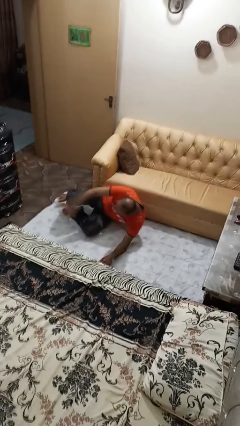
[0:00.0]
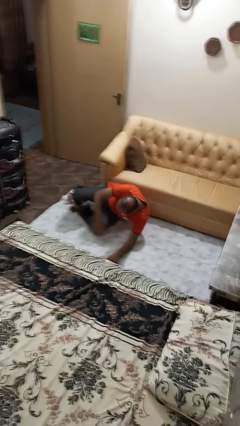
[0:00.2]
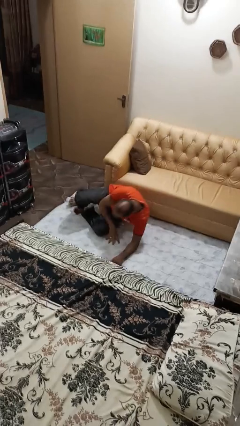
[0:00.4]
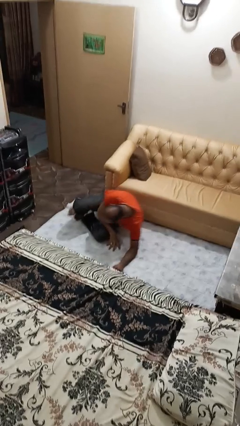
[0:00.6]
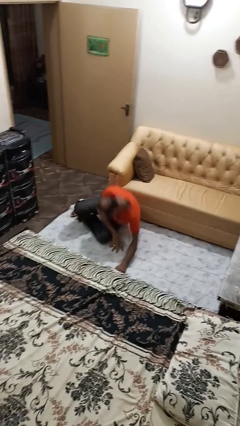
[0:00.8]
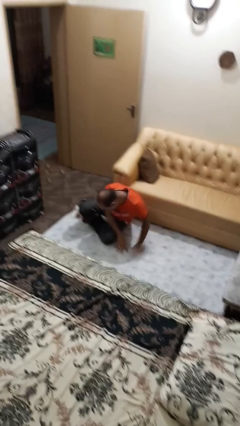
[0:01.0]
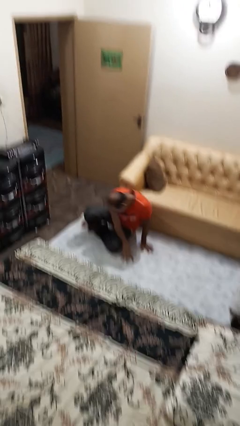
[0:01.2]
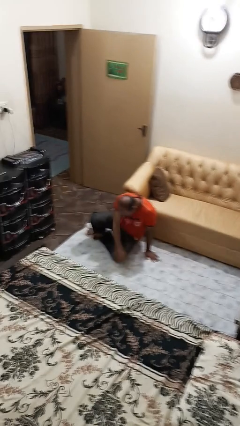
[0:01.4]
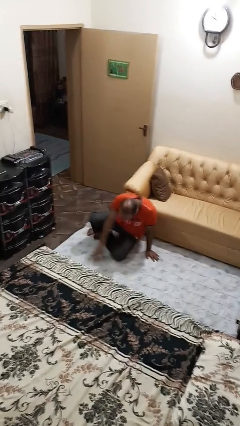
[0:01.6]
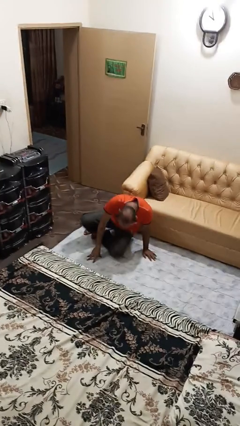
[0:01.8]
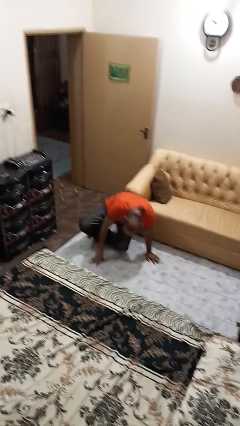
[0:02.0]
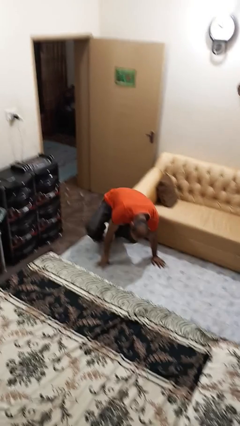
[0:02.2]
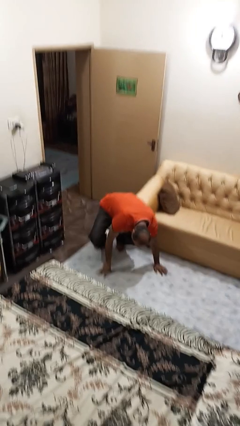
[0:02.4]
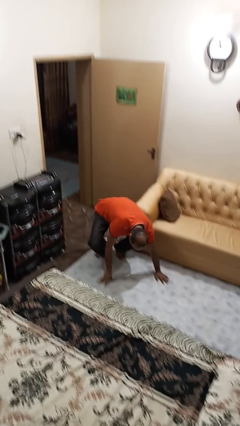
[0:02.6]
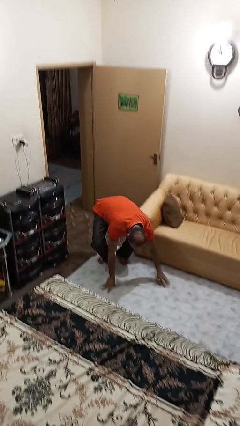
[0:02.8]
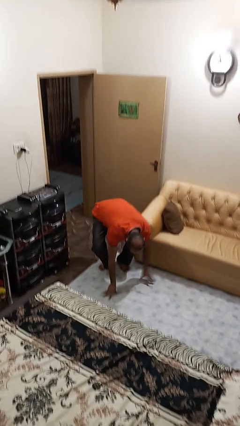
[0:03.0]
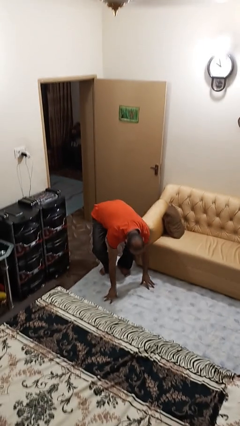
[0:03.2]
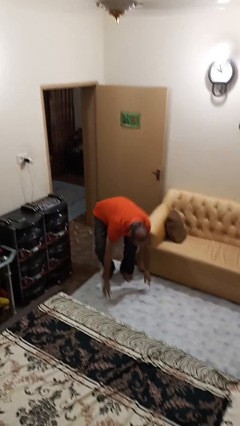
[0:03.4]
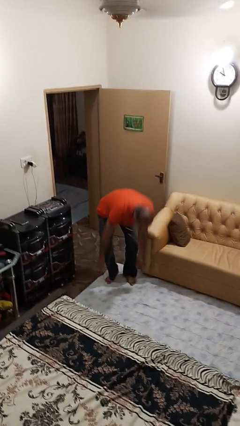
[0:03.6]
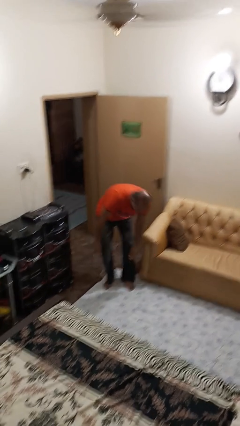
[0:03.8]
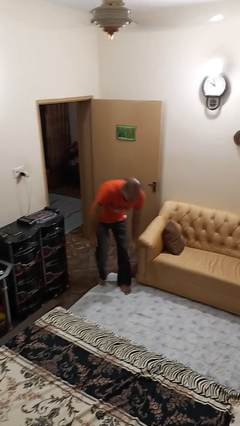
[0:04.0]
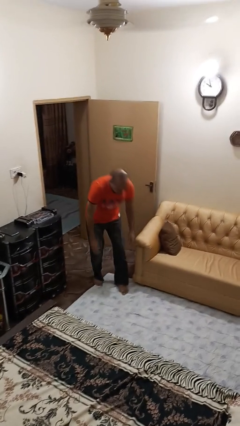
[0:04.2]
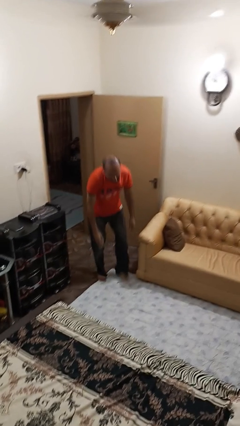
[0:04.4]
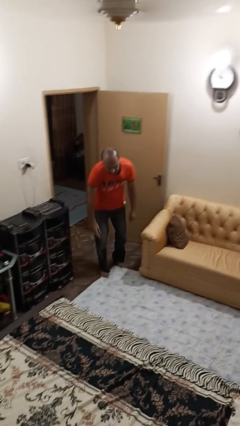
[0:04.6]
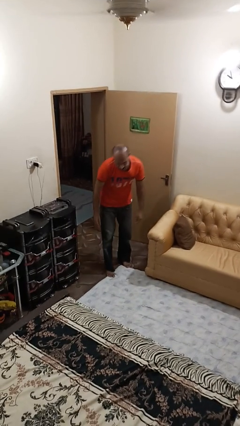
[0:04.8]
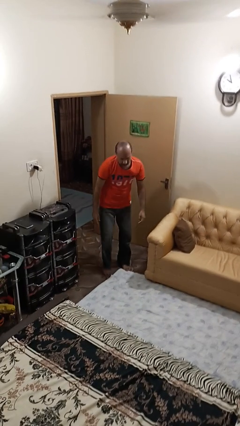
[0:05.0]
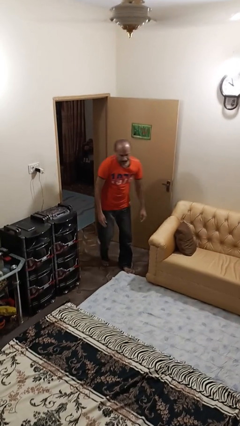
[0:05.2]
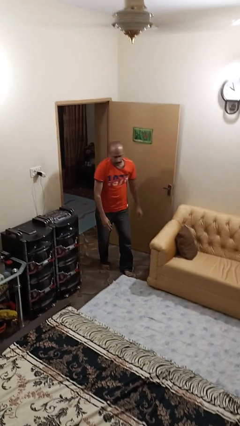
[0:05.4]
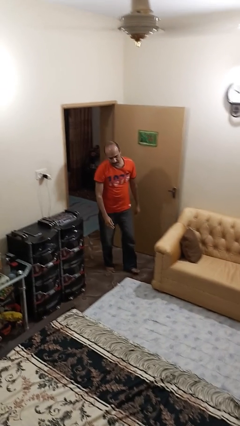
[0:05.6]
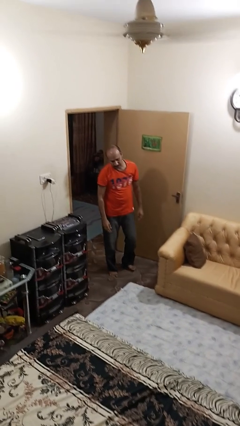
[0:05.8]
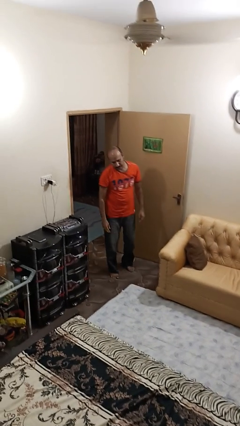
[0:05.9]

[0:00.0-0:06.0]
person stands up from floor

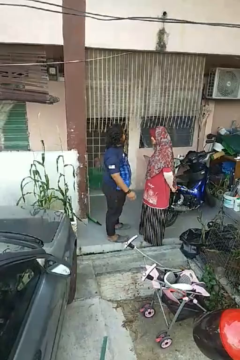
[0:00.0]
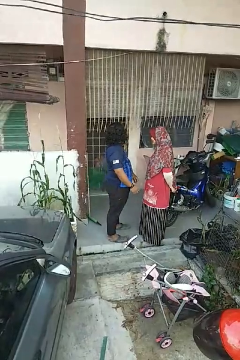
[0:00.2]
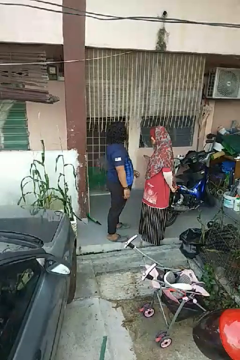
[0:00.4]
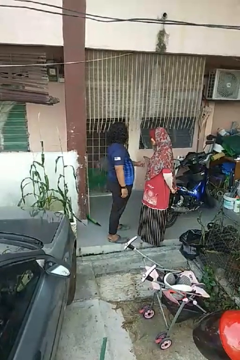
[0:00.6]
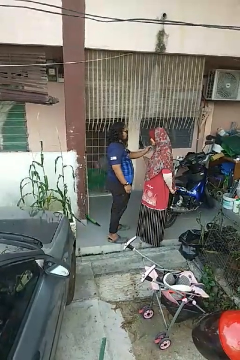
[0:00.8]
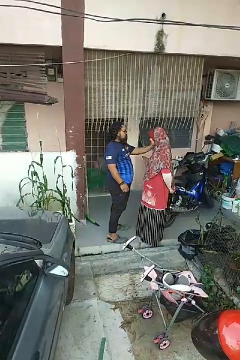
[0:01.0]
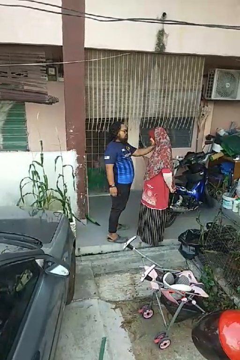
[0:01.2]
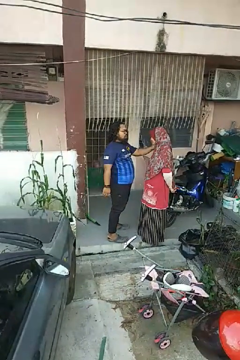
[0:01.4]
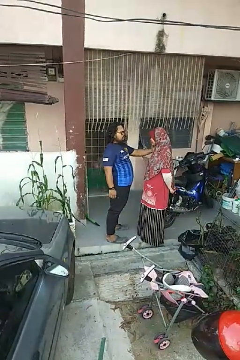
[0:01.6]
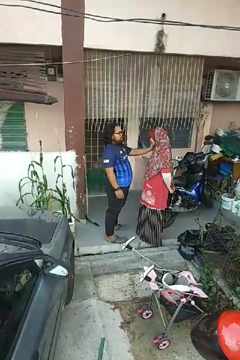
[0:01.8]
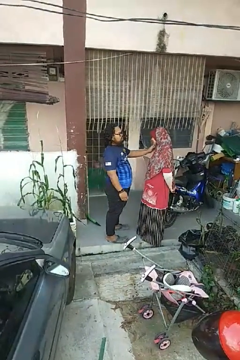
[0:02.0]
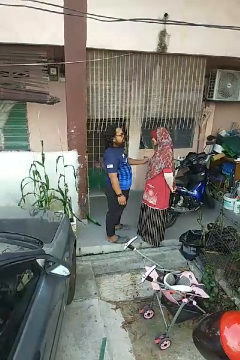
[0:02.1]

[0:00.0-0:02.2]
person pounds shoulders of person

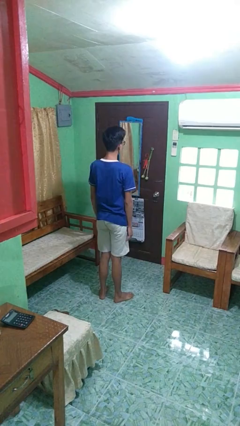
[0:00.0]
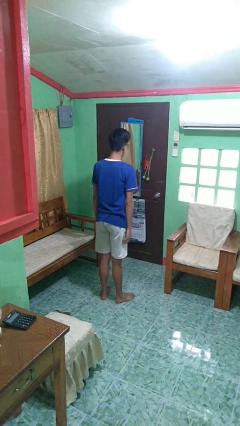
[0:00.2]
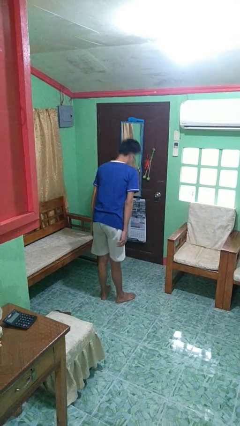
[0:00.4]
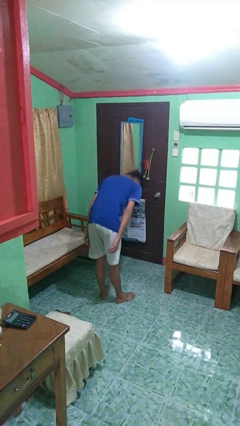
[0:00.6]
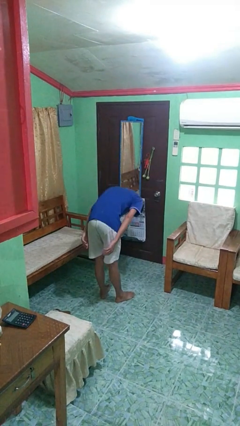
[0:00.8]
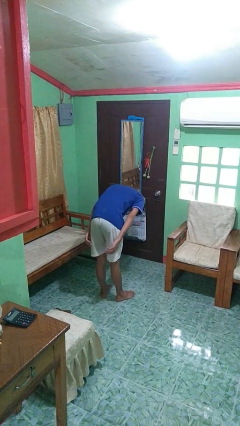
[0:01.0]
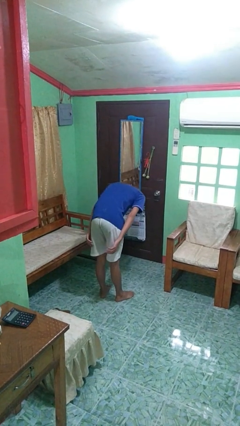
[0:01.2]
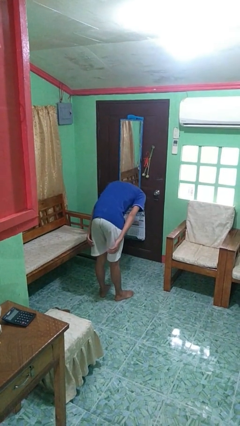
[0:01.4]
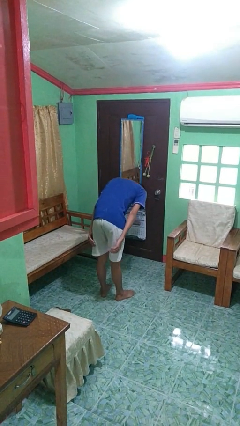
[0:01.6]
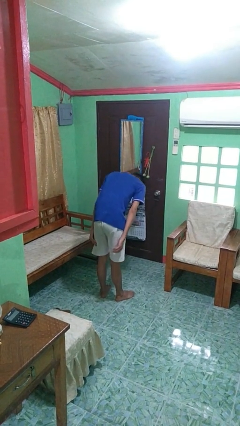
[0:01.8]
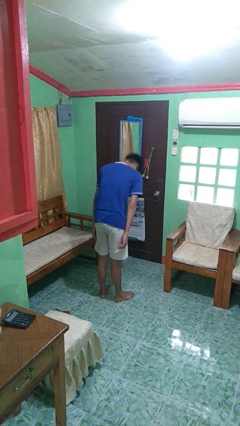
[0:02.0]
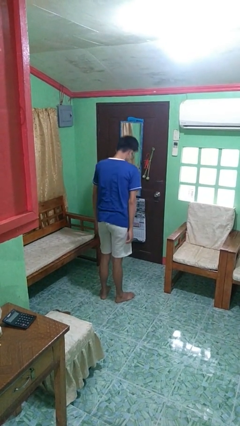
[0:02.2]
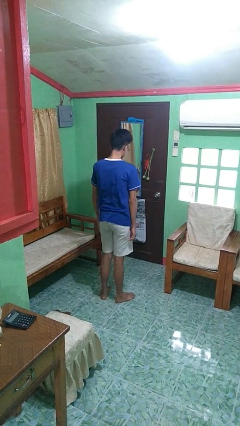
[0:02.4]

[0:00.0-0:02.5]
person bows

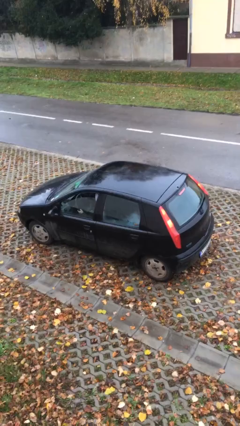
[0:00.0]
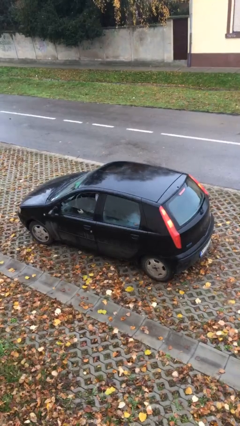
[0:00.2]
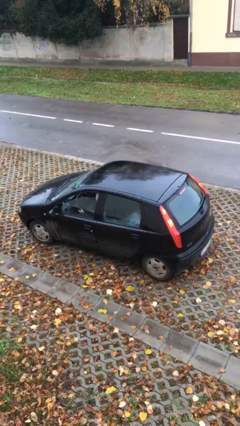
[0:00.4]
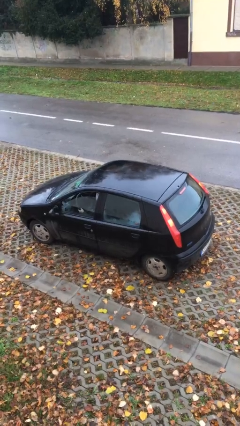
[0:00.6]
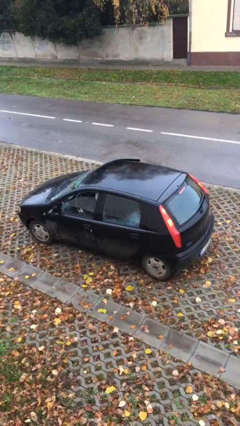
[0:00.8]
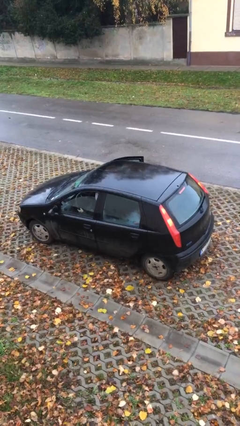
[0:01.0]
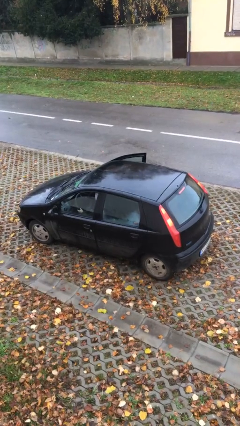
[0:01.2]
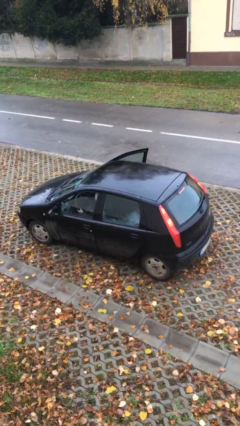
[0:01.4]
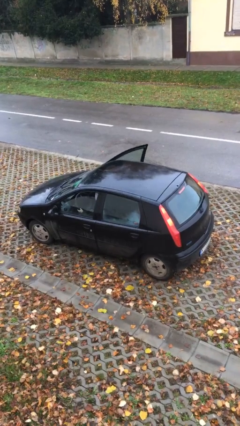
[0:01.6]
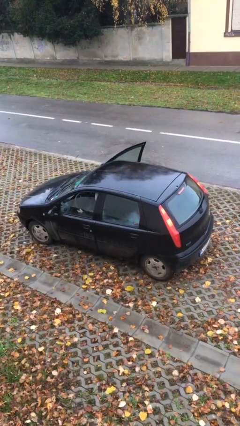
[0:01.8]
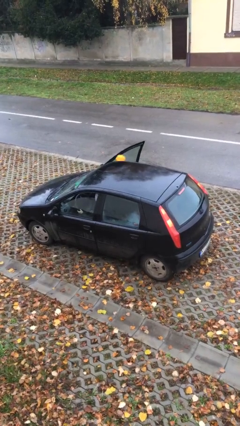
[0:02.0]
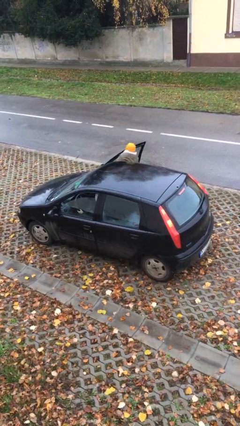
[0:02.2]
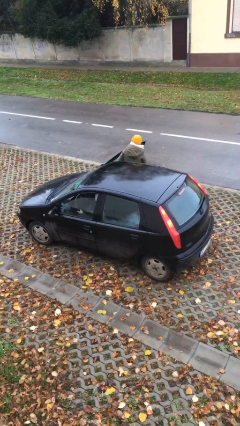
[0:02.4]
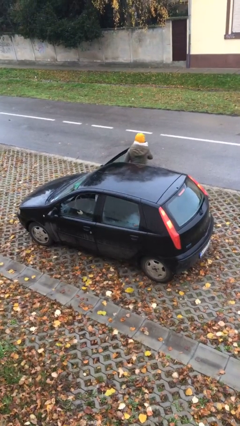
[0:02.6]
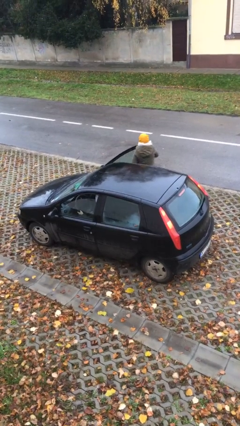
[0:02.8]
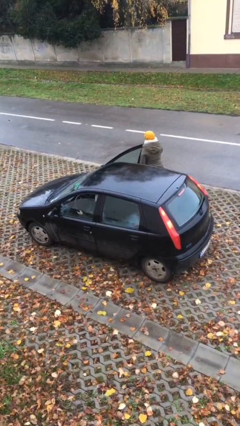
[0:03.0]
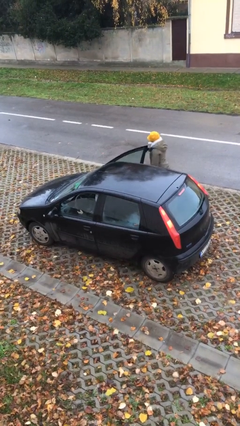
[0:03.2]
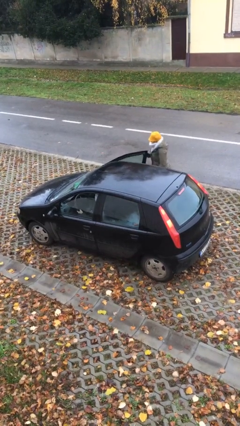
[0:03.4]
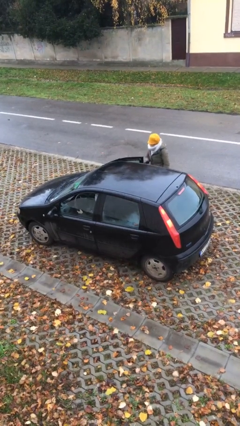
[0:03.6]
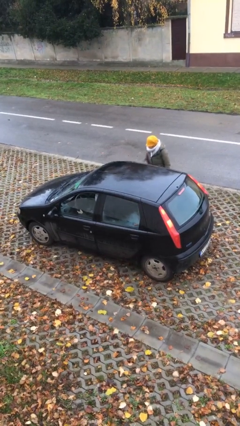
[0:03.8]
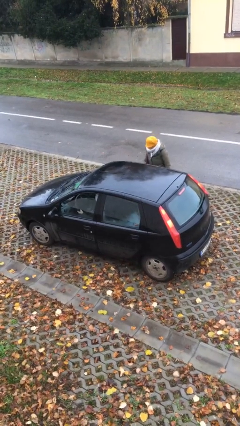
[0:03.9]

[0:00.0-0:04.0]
car drops off person

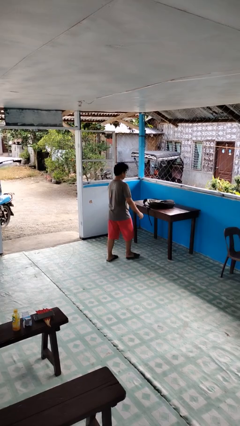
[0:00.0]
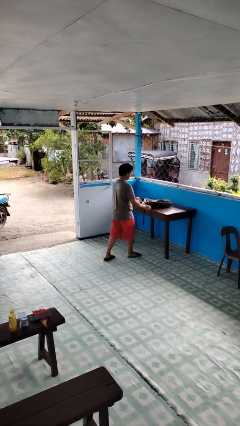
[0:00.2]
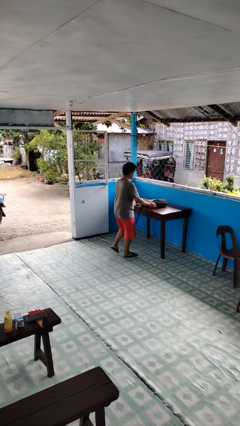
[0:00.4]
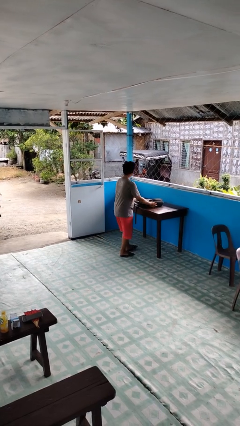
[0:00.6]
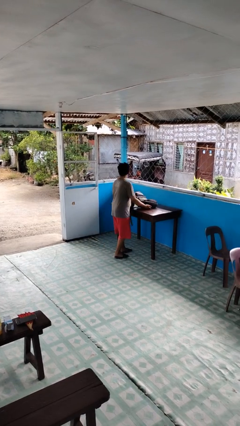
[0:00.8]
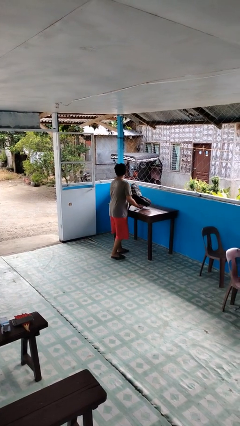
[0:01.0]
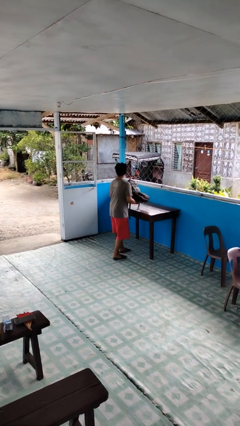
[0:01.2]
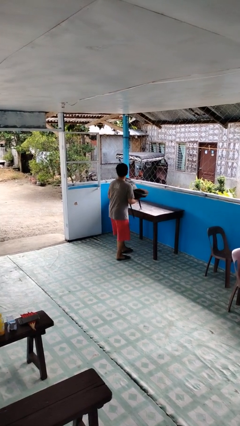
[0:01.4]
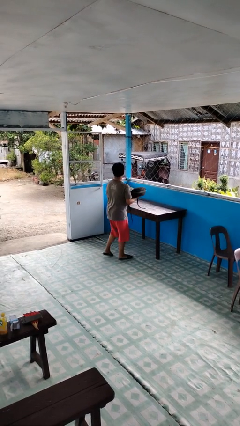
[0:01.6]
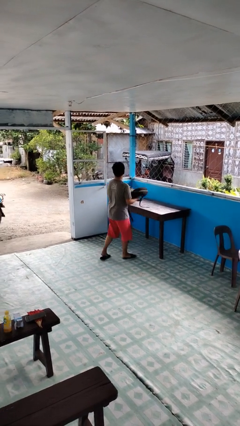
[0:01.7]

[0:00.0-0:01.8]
person picks up object from table

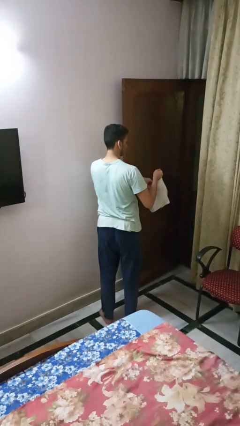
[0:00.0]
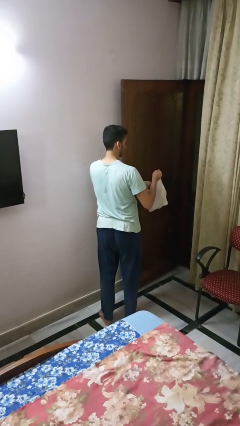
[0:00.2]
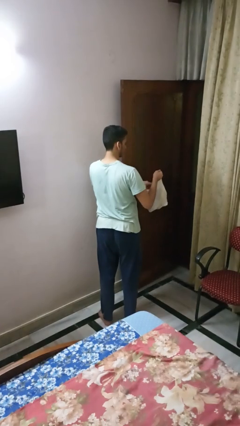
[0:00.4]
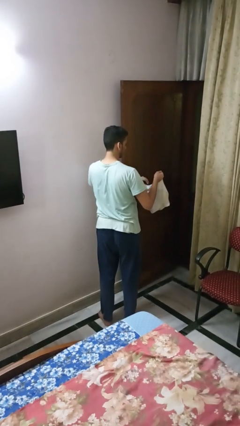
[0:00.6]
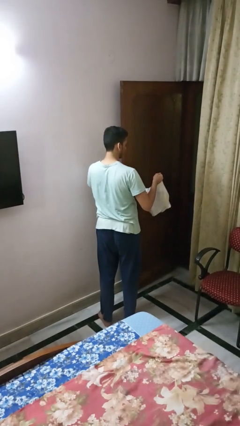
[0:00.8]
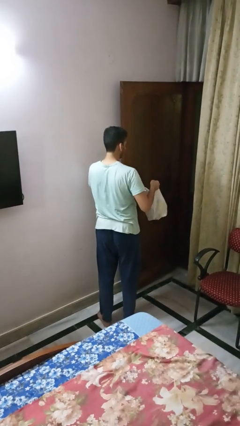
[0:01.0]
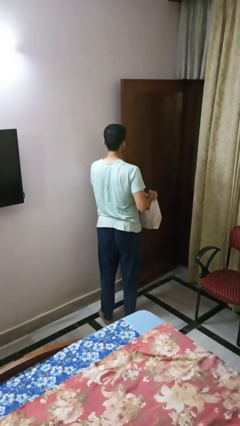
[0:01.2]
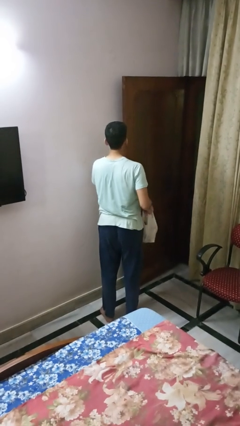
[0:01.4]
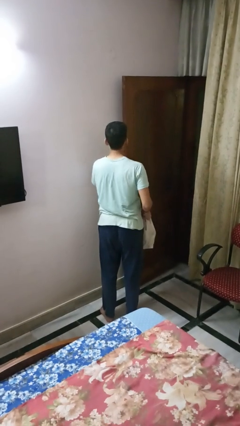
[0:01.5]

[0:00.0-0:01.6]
person puts object into bag
